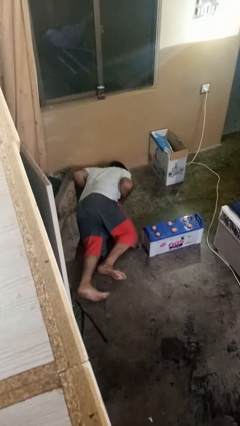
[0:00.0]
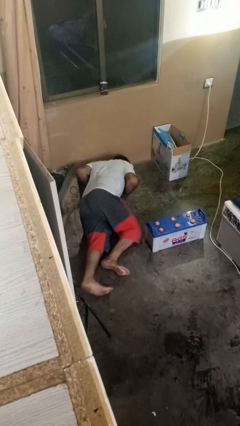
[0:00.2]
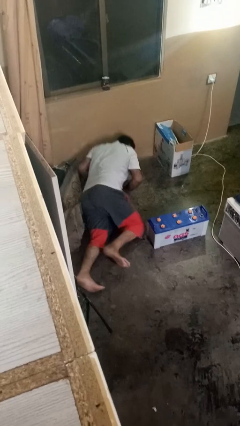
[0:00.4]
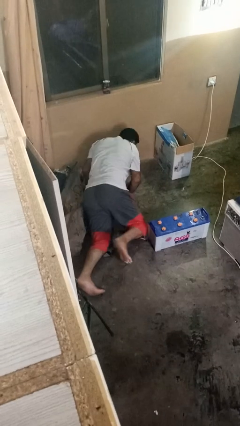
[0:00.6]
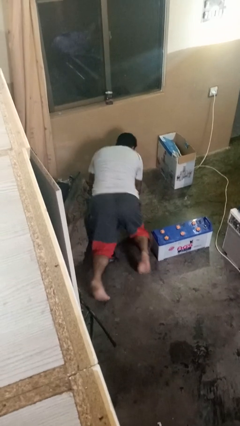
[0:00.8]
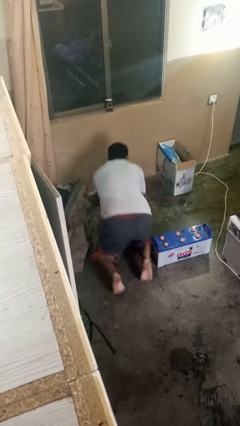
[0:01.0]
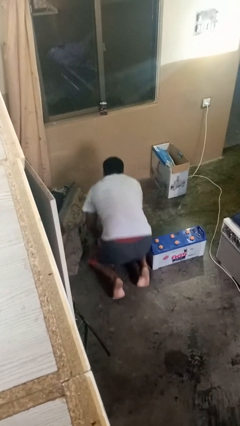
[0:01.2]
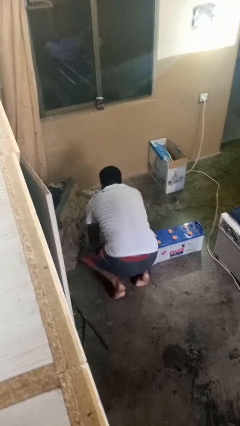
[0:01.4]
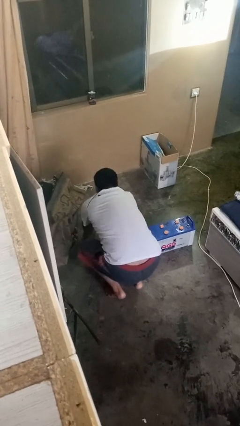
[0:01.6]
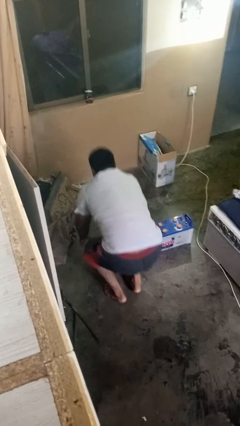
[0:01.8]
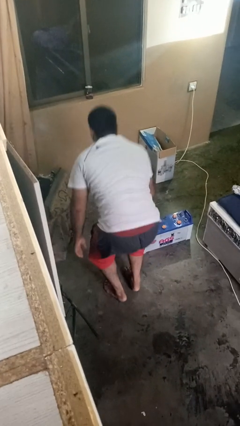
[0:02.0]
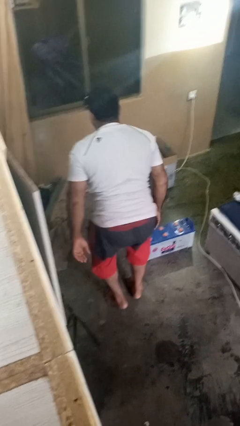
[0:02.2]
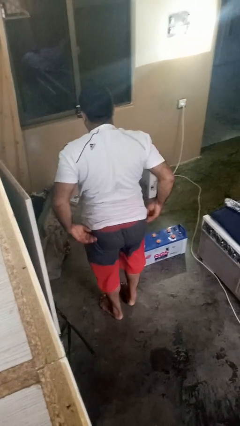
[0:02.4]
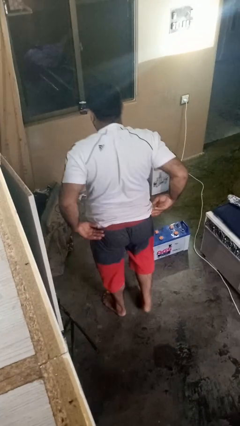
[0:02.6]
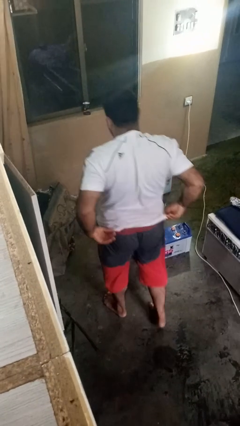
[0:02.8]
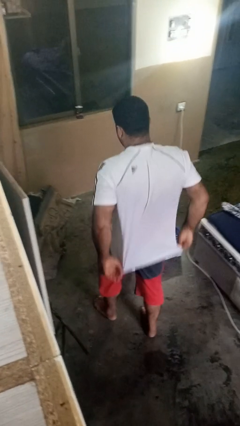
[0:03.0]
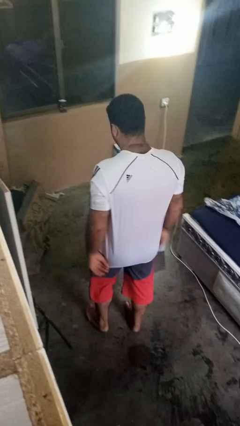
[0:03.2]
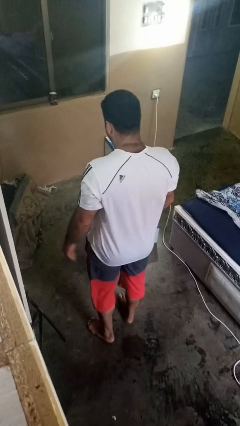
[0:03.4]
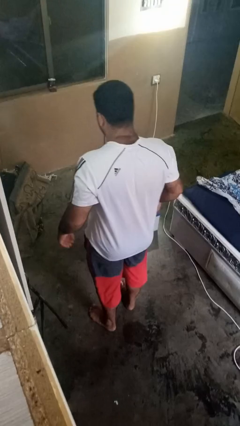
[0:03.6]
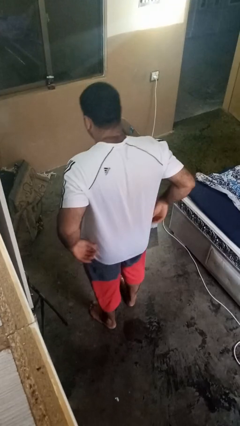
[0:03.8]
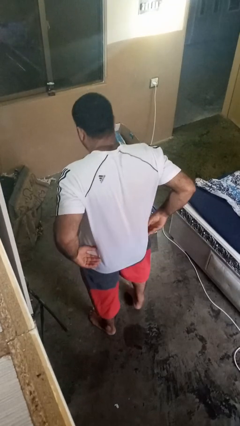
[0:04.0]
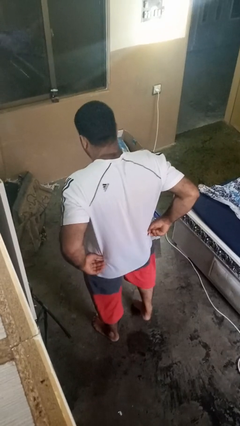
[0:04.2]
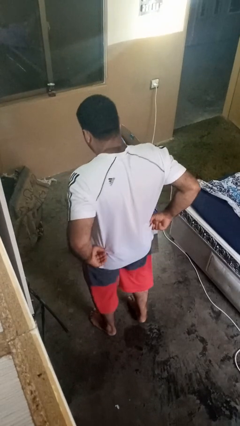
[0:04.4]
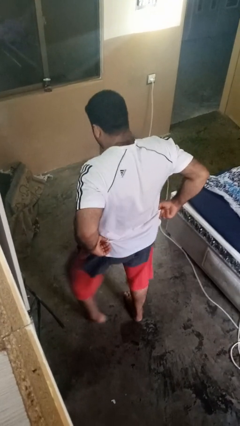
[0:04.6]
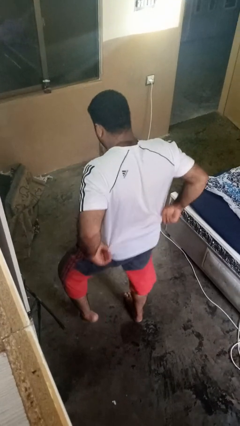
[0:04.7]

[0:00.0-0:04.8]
person stands up from floor

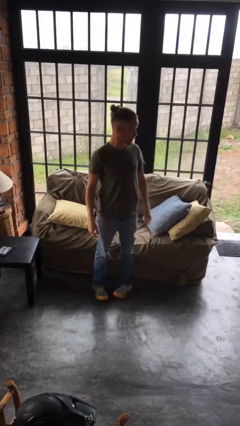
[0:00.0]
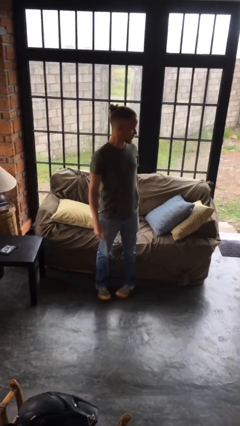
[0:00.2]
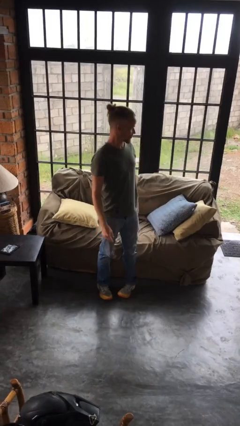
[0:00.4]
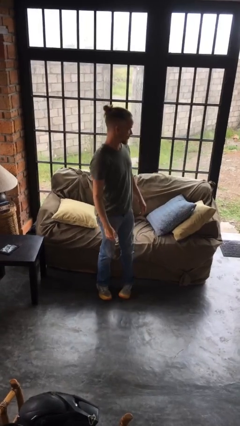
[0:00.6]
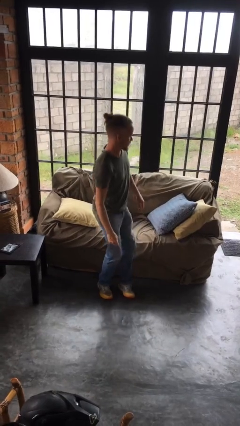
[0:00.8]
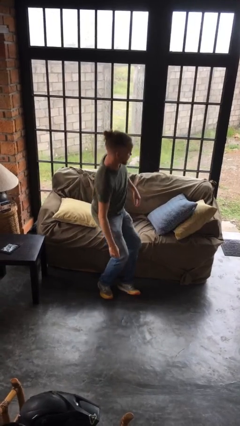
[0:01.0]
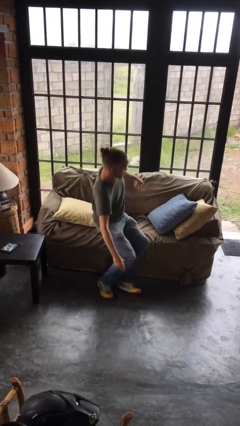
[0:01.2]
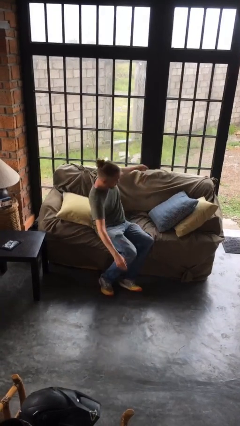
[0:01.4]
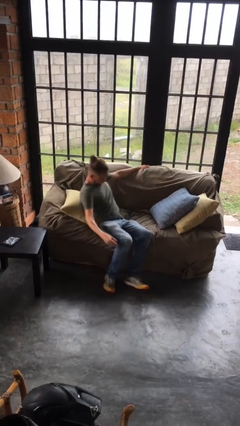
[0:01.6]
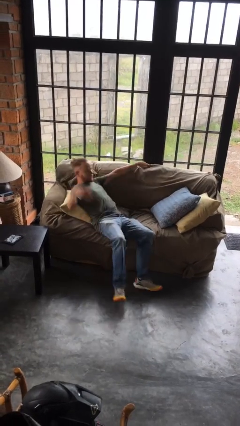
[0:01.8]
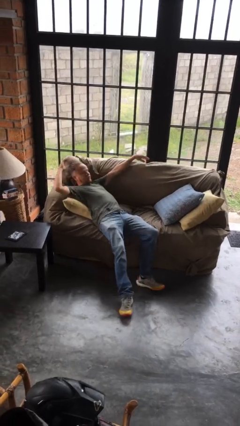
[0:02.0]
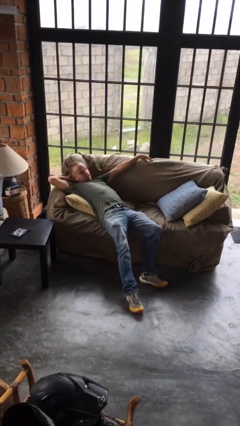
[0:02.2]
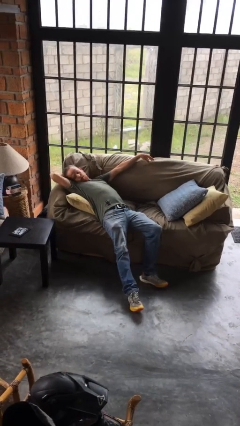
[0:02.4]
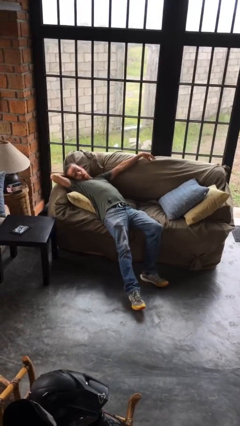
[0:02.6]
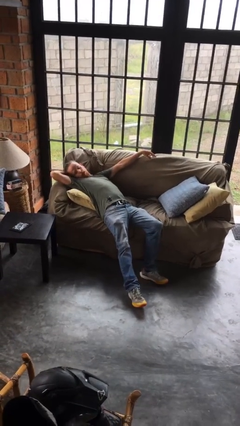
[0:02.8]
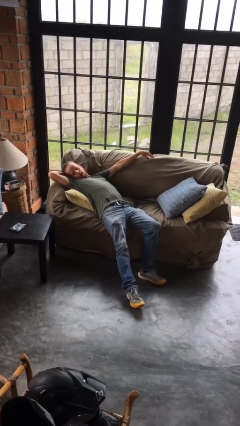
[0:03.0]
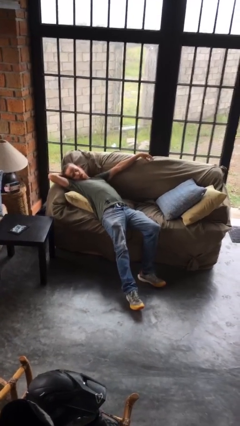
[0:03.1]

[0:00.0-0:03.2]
person lies down on couch

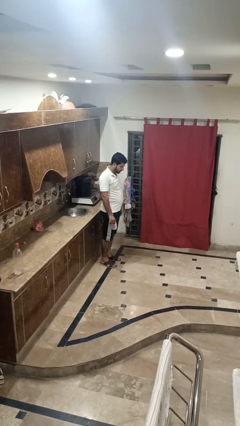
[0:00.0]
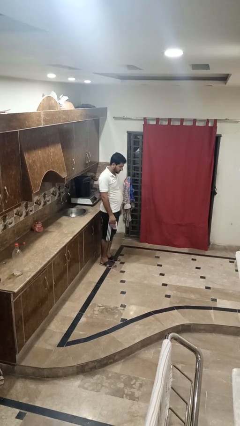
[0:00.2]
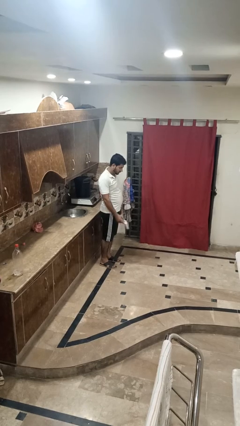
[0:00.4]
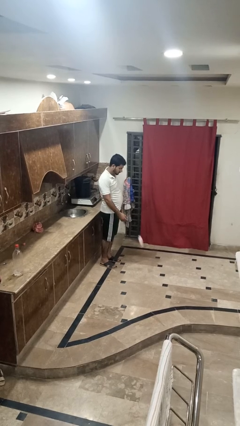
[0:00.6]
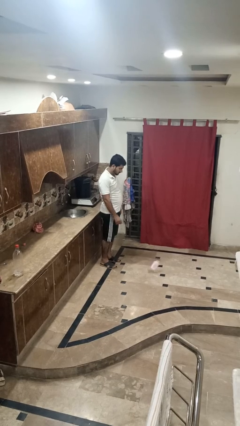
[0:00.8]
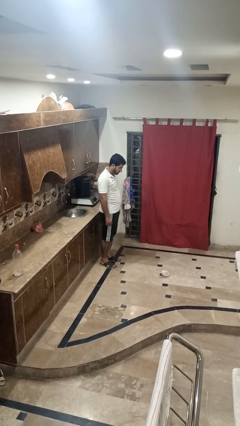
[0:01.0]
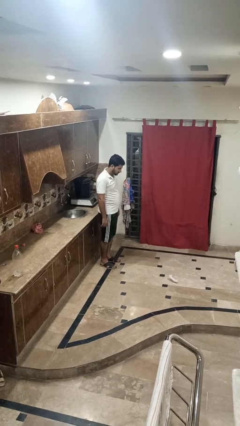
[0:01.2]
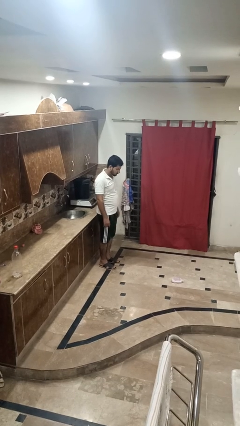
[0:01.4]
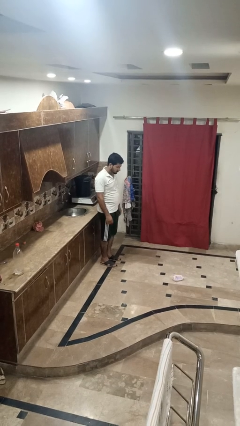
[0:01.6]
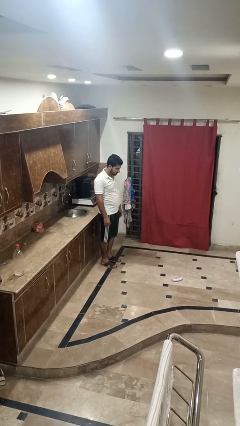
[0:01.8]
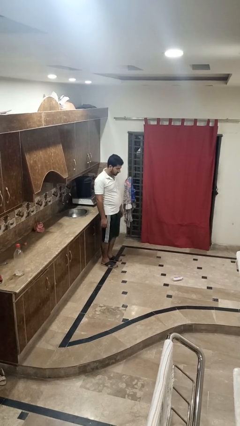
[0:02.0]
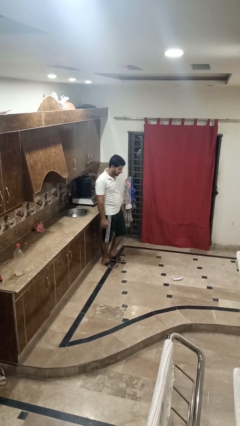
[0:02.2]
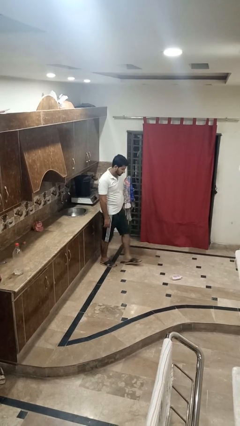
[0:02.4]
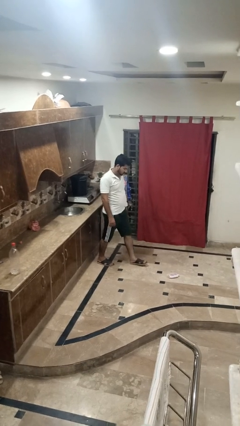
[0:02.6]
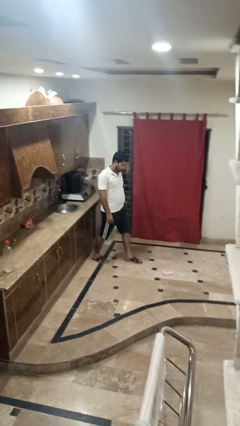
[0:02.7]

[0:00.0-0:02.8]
person throws object to ground

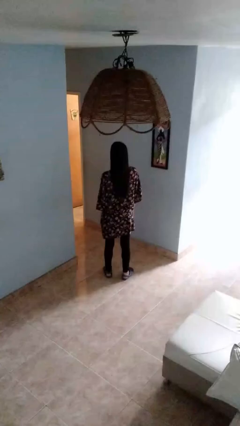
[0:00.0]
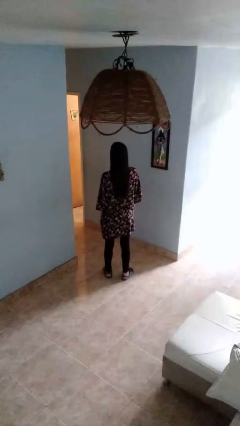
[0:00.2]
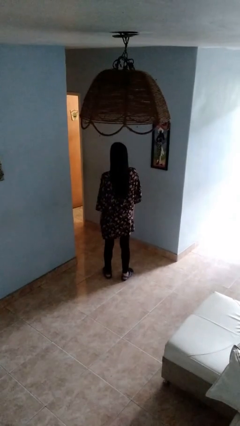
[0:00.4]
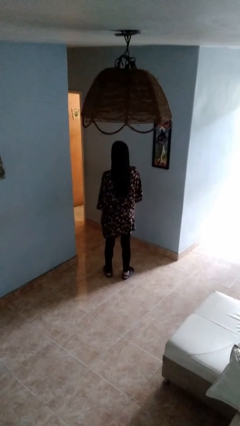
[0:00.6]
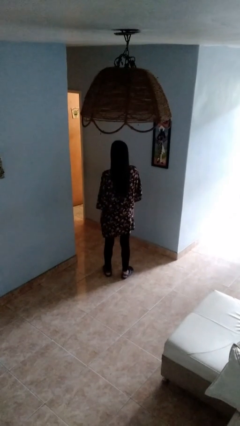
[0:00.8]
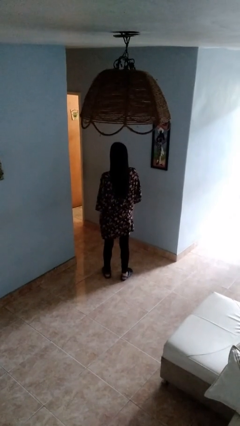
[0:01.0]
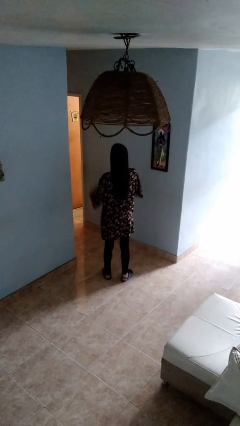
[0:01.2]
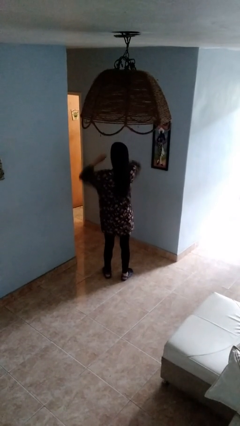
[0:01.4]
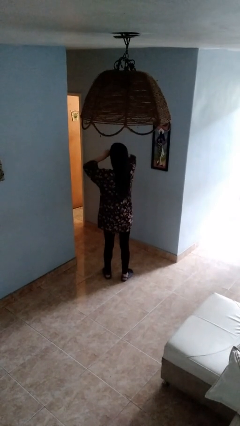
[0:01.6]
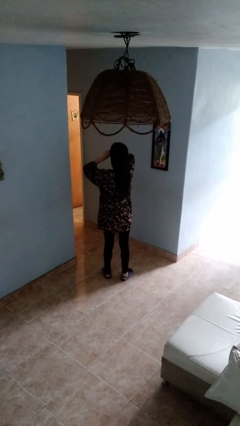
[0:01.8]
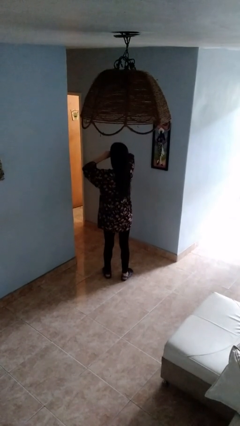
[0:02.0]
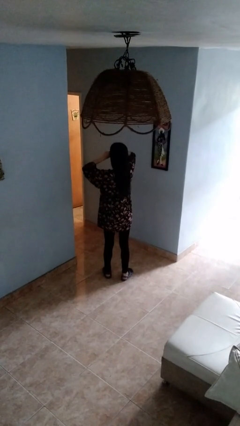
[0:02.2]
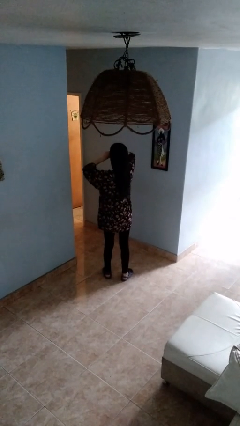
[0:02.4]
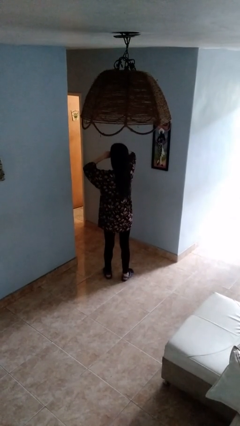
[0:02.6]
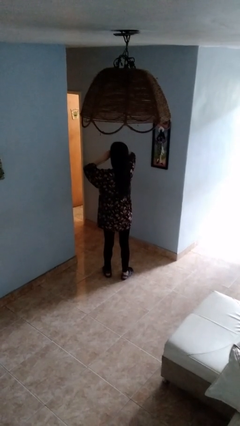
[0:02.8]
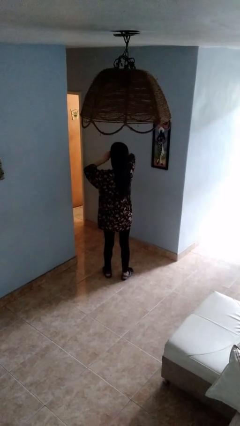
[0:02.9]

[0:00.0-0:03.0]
person rubs eyes

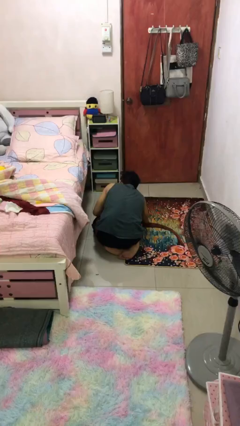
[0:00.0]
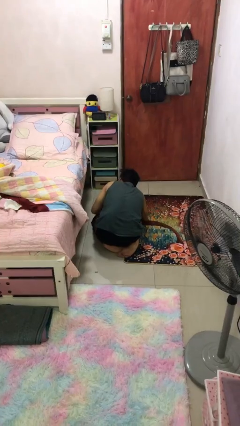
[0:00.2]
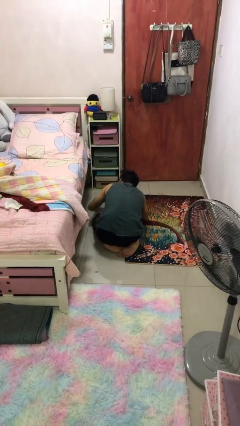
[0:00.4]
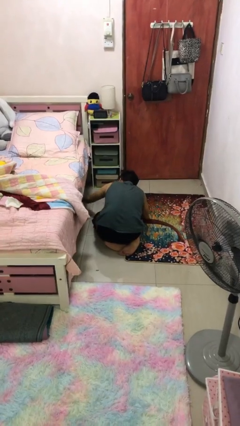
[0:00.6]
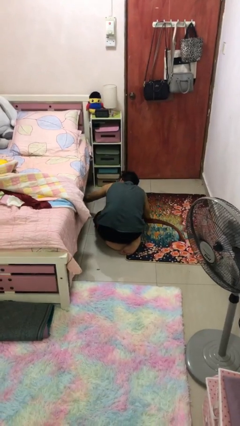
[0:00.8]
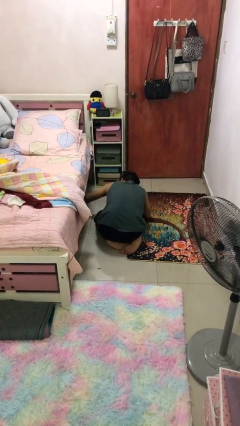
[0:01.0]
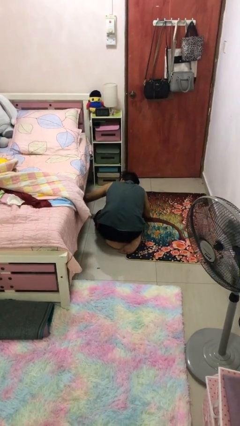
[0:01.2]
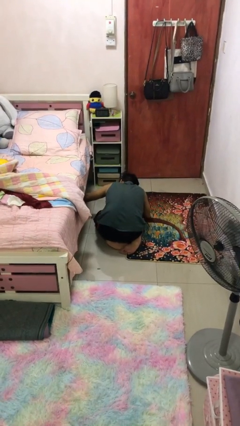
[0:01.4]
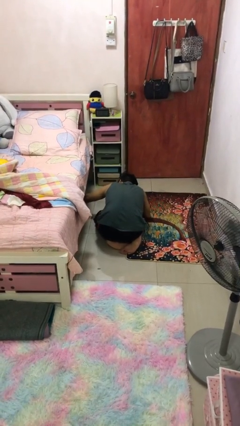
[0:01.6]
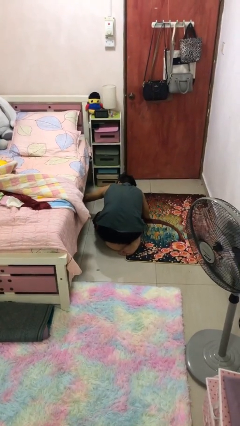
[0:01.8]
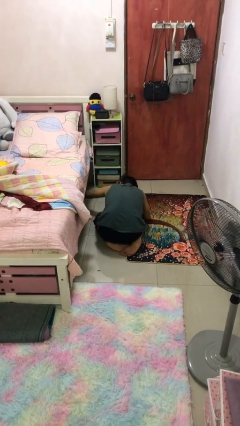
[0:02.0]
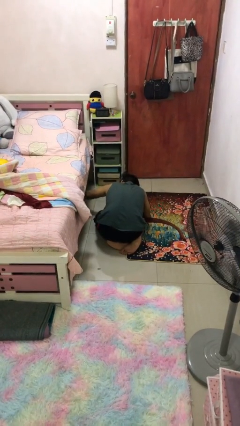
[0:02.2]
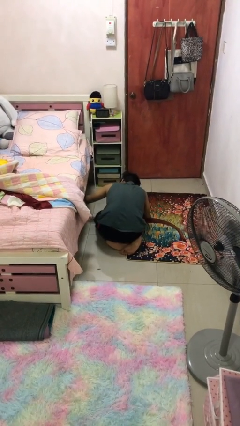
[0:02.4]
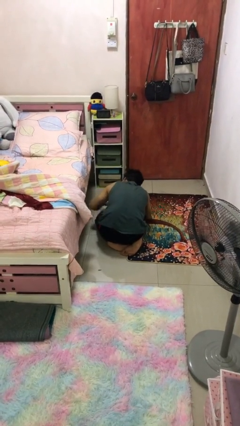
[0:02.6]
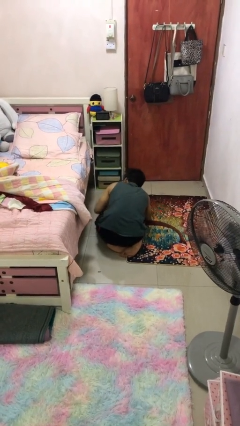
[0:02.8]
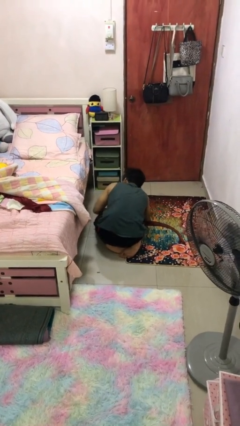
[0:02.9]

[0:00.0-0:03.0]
person searches under bed

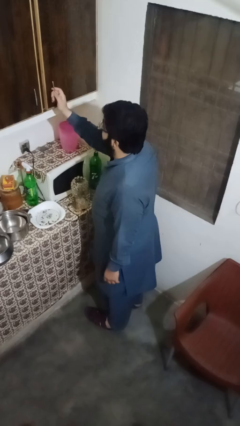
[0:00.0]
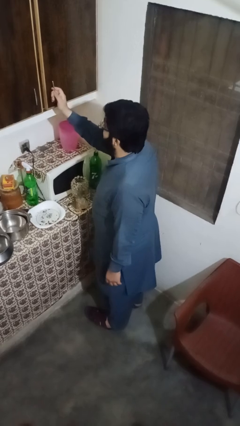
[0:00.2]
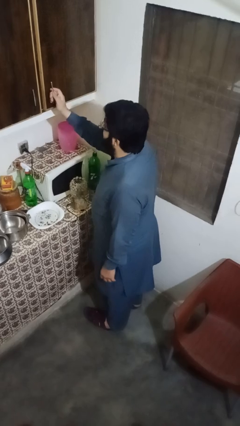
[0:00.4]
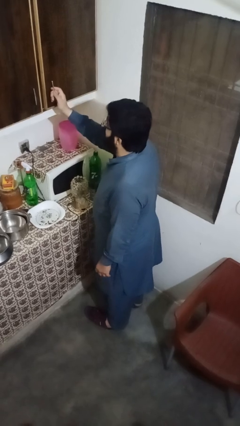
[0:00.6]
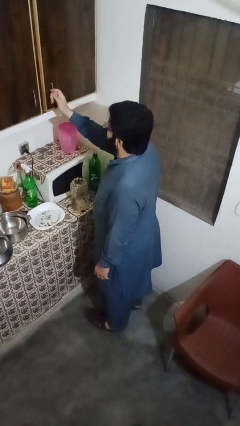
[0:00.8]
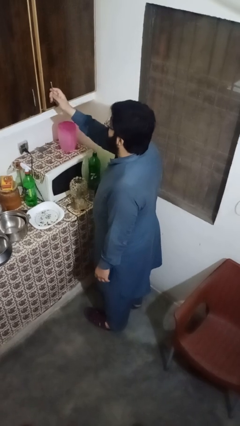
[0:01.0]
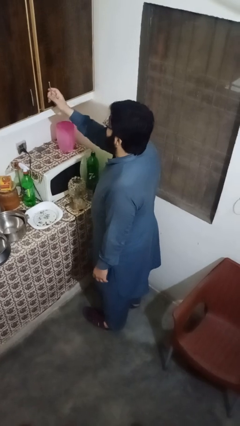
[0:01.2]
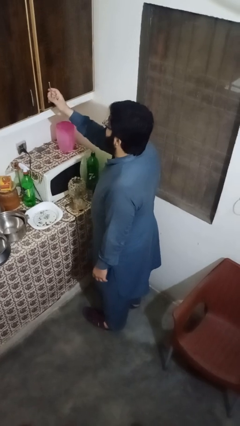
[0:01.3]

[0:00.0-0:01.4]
person closes cabinet
